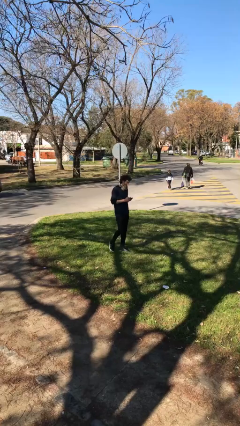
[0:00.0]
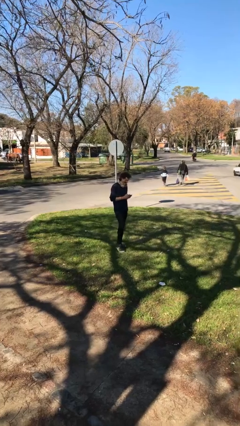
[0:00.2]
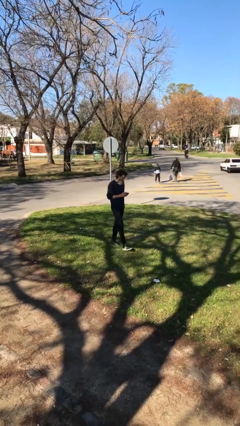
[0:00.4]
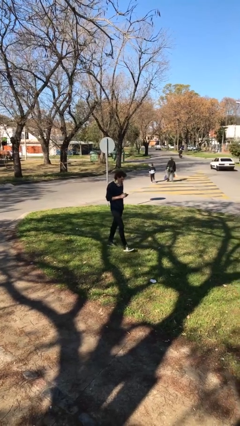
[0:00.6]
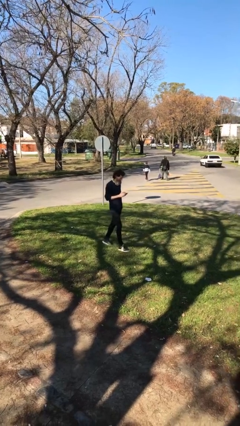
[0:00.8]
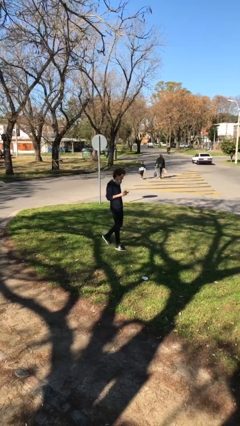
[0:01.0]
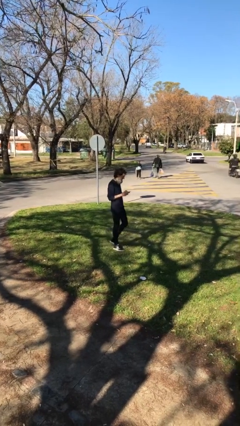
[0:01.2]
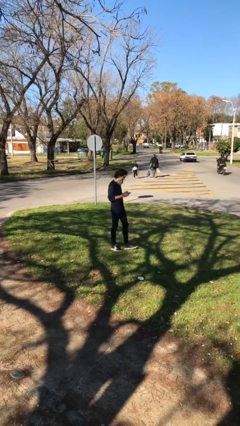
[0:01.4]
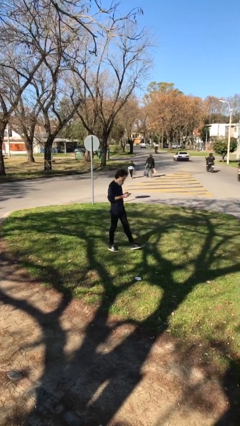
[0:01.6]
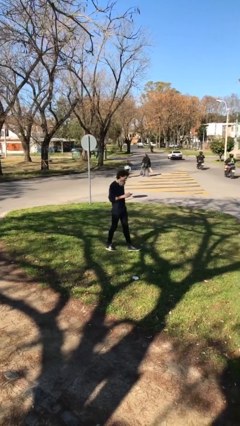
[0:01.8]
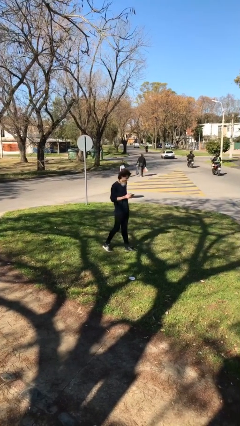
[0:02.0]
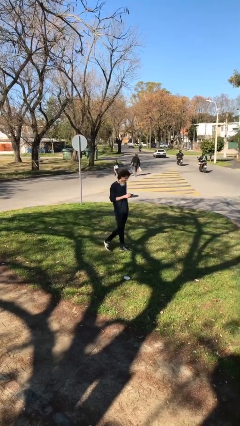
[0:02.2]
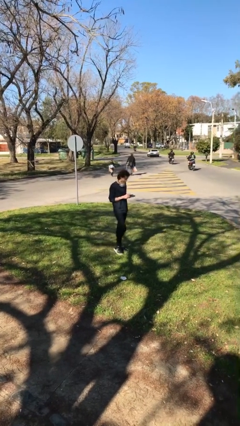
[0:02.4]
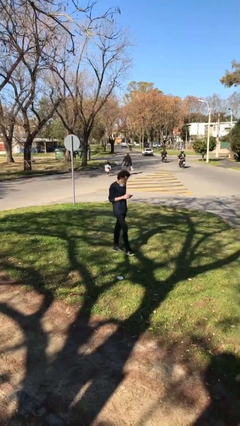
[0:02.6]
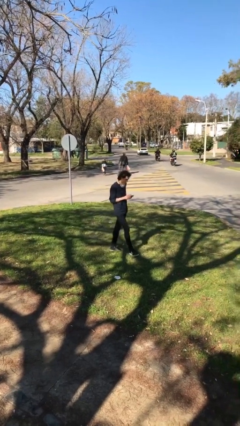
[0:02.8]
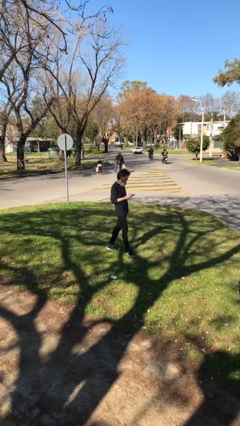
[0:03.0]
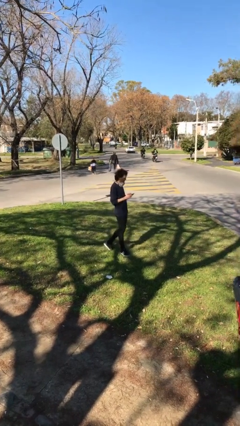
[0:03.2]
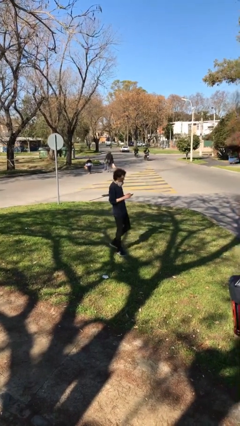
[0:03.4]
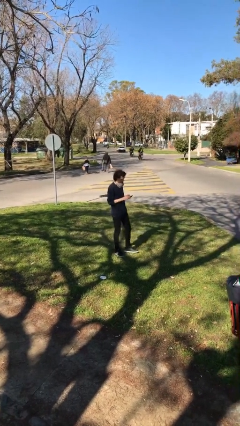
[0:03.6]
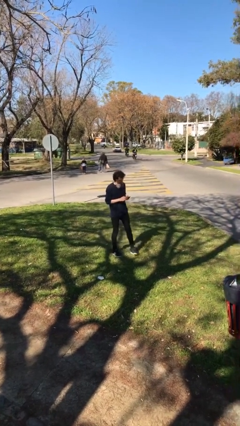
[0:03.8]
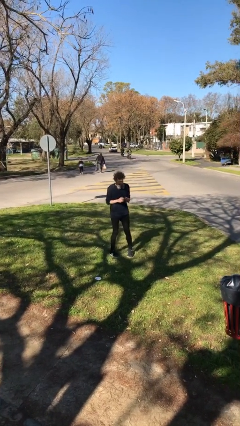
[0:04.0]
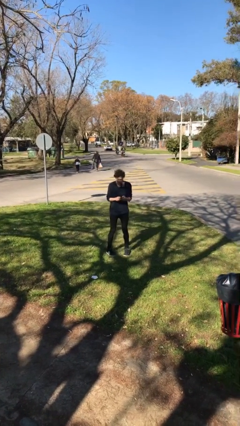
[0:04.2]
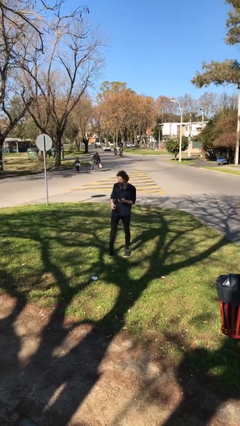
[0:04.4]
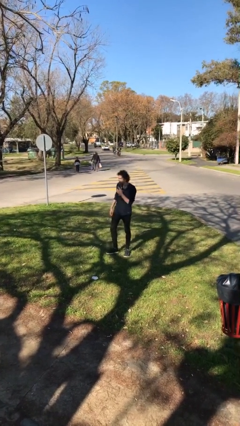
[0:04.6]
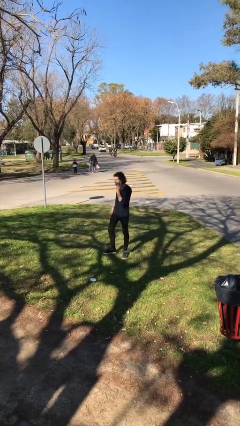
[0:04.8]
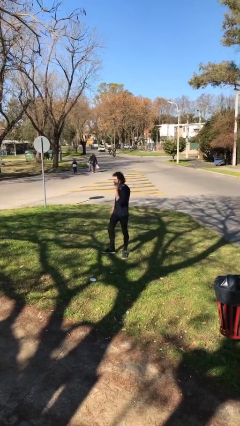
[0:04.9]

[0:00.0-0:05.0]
person texts on phone

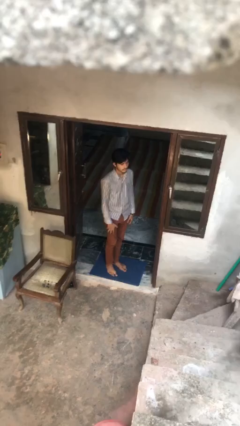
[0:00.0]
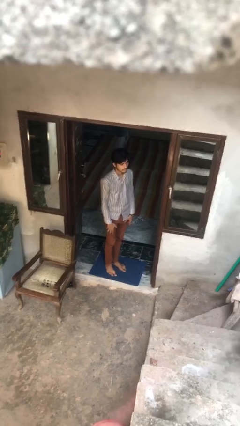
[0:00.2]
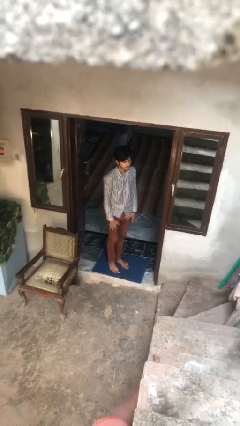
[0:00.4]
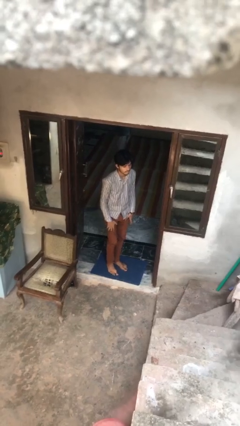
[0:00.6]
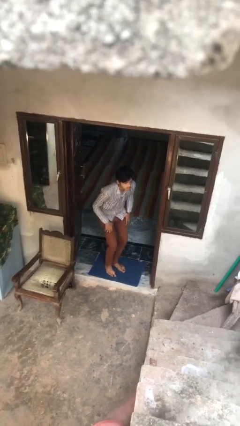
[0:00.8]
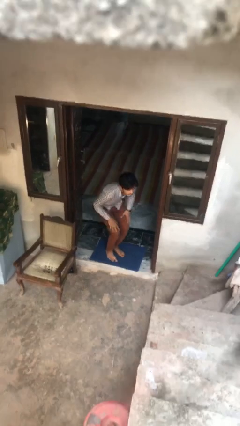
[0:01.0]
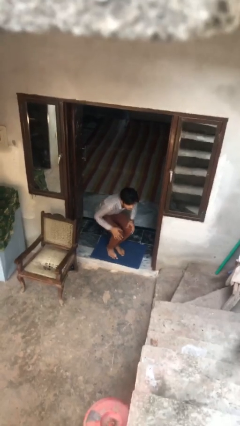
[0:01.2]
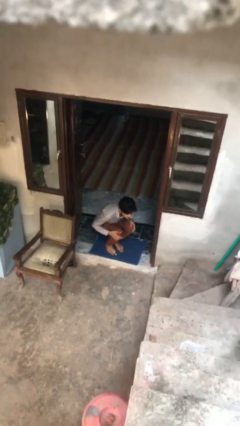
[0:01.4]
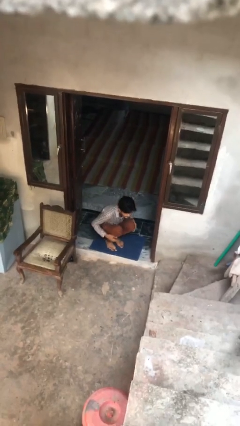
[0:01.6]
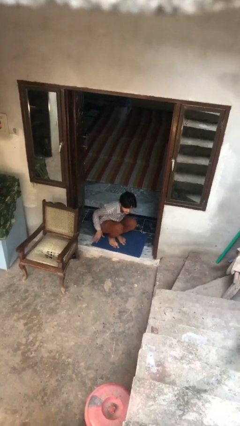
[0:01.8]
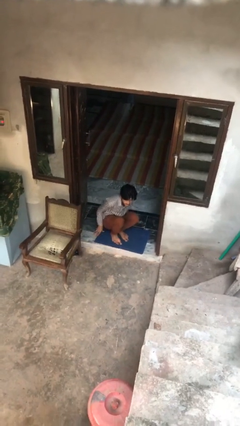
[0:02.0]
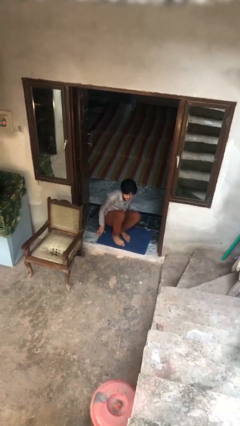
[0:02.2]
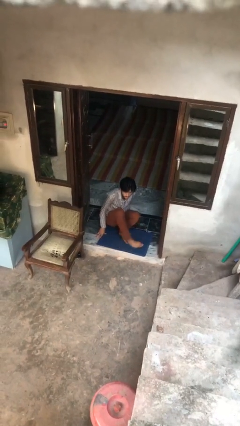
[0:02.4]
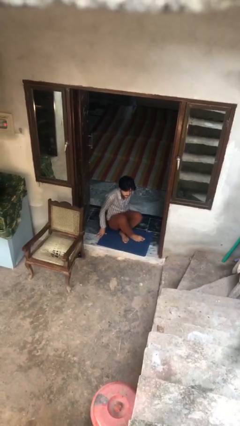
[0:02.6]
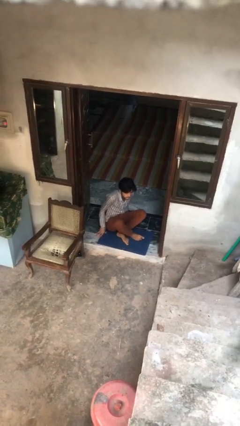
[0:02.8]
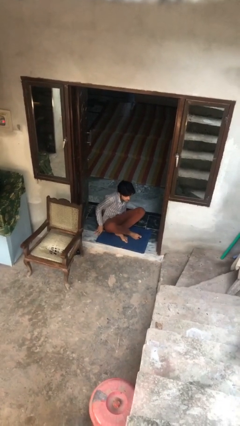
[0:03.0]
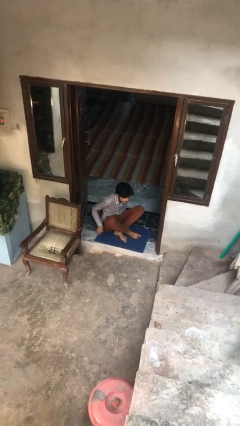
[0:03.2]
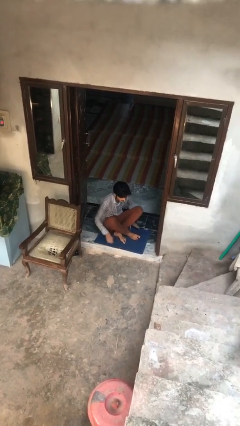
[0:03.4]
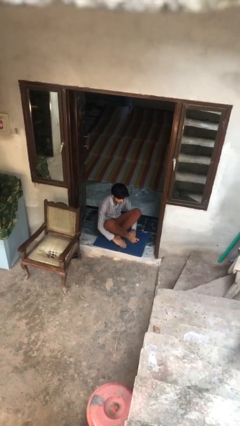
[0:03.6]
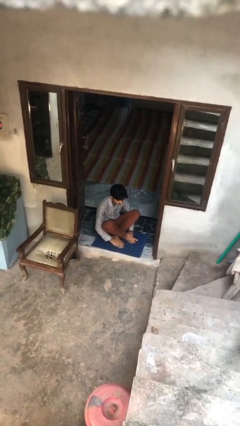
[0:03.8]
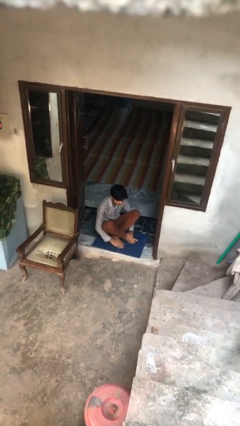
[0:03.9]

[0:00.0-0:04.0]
person sits crisscross

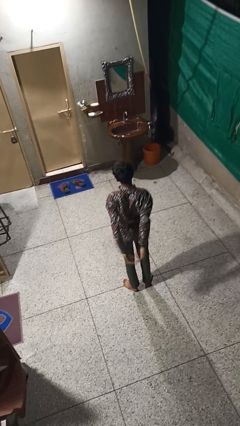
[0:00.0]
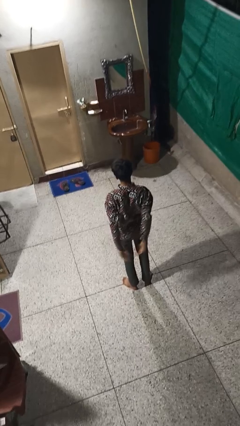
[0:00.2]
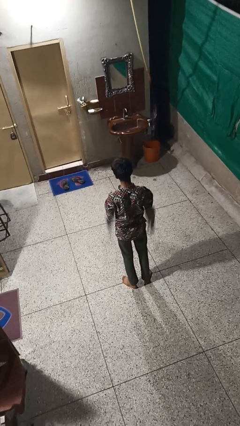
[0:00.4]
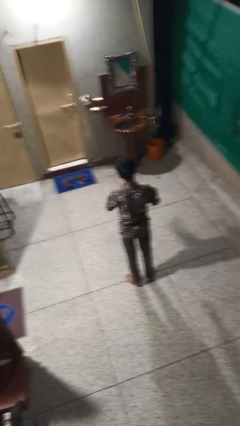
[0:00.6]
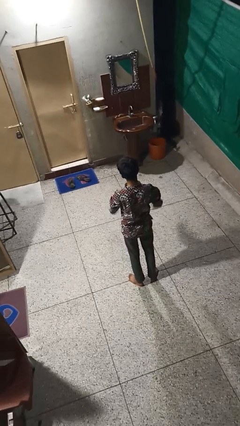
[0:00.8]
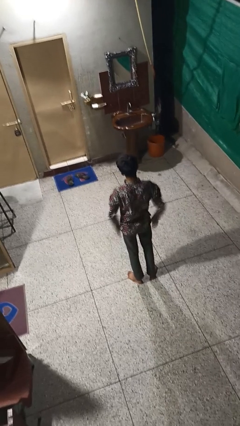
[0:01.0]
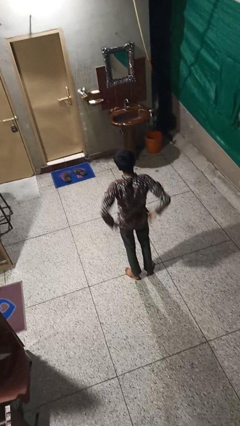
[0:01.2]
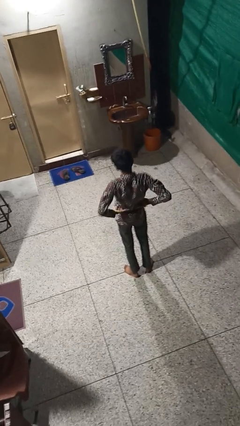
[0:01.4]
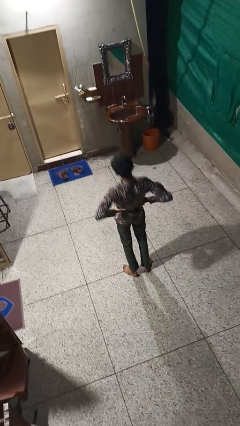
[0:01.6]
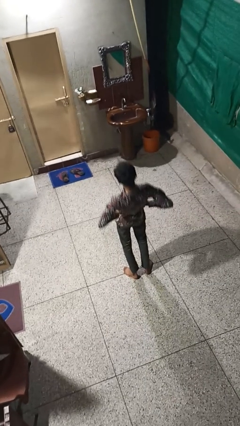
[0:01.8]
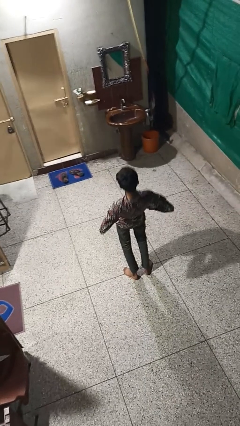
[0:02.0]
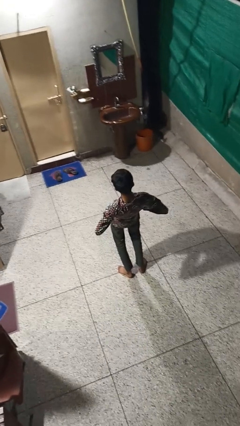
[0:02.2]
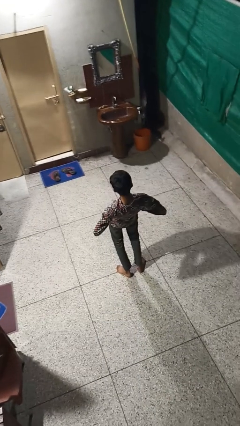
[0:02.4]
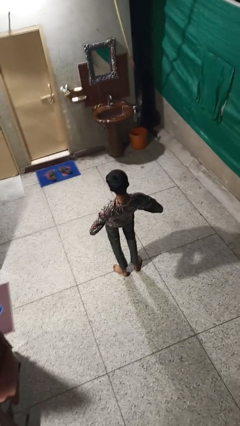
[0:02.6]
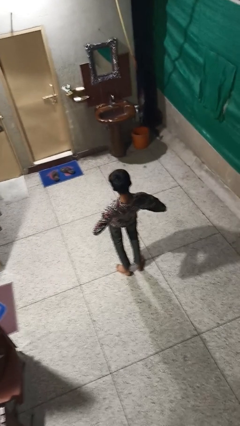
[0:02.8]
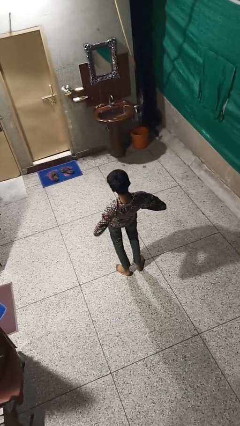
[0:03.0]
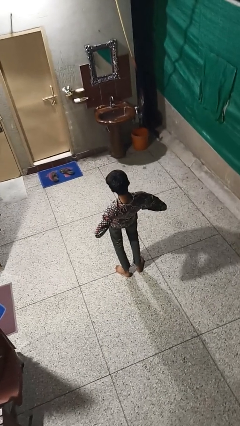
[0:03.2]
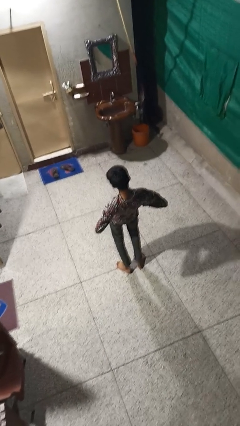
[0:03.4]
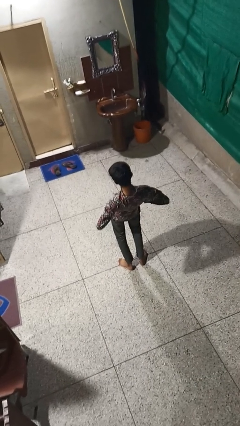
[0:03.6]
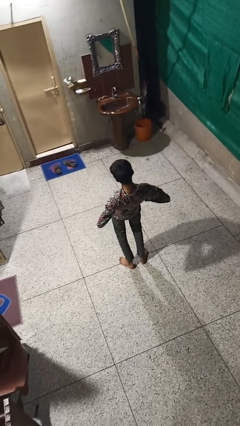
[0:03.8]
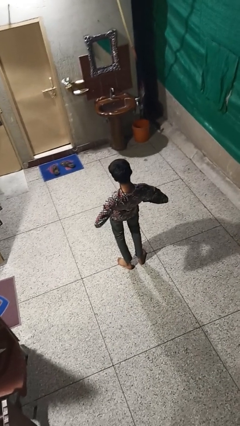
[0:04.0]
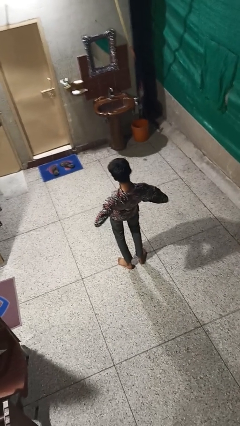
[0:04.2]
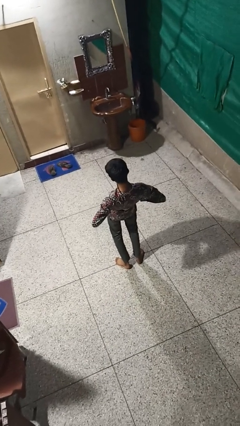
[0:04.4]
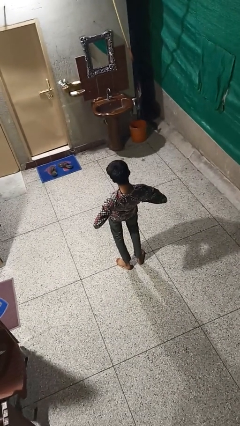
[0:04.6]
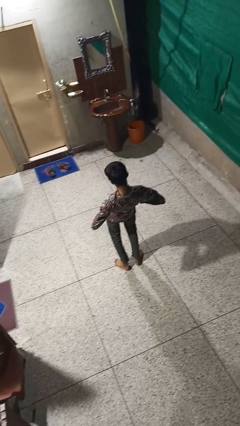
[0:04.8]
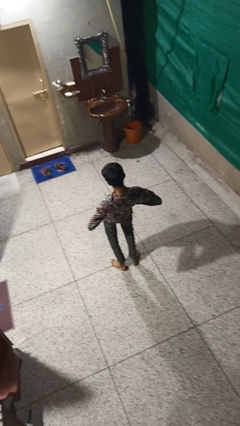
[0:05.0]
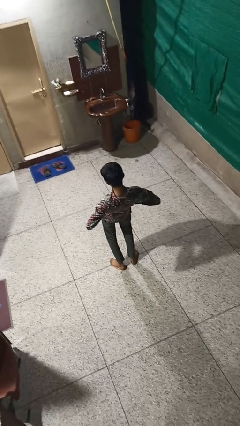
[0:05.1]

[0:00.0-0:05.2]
person stretches back

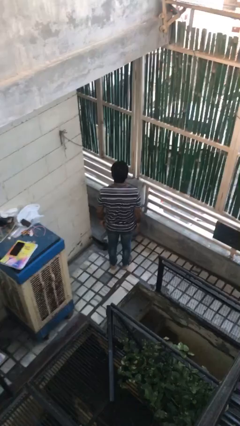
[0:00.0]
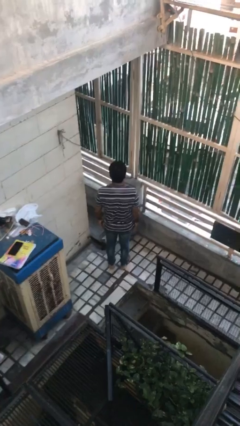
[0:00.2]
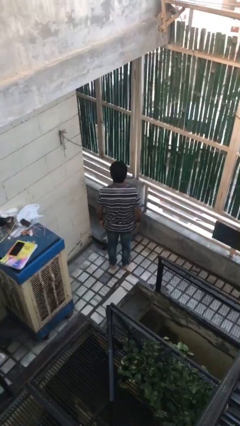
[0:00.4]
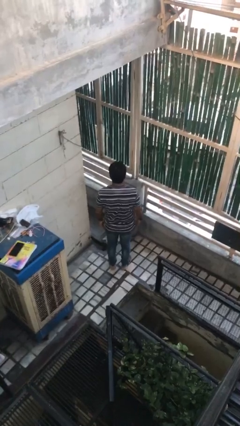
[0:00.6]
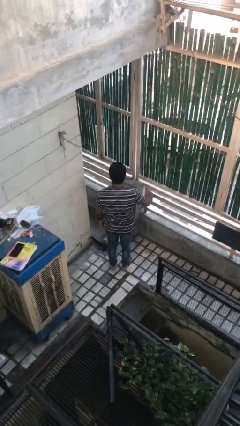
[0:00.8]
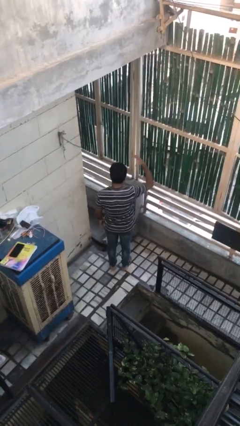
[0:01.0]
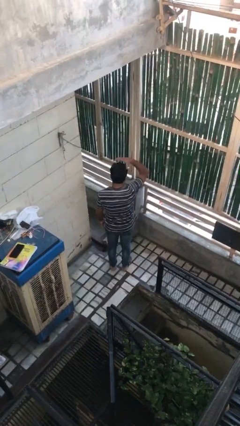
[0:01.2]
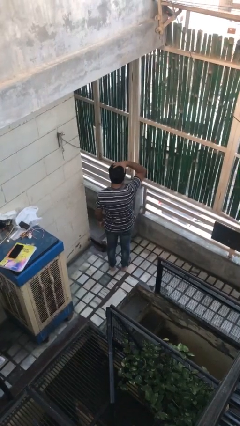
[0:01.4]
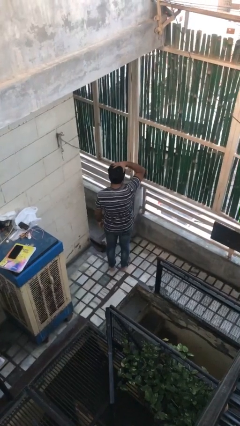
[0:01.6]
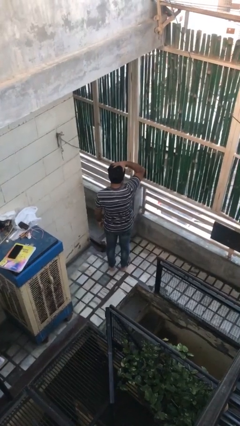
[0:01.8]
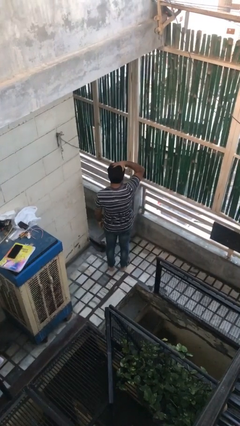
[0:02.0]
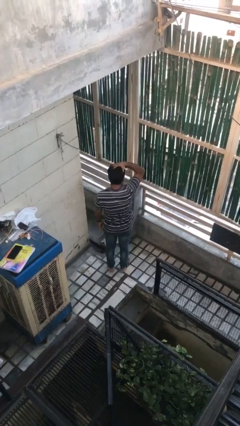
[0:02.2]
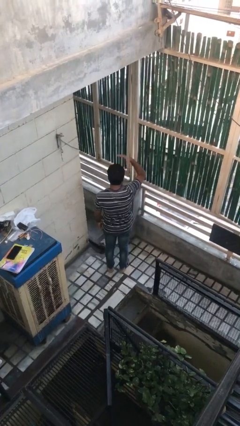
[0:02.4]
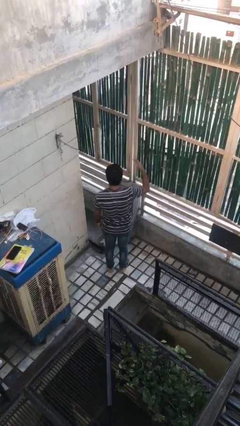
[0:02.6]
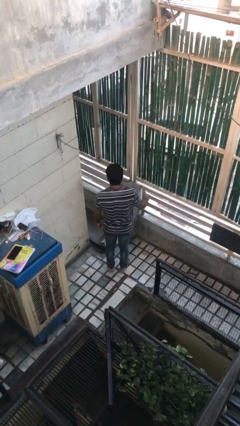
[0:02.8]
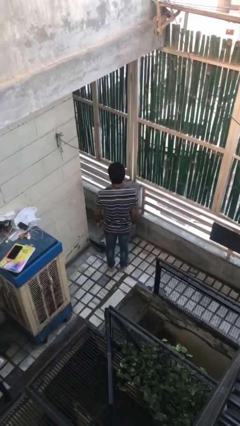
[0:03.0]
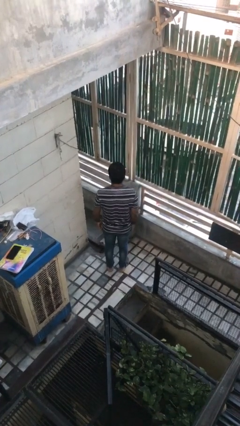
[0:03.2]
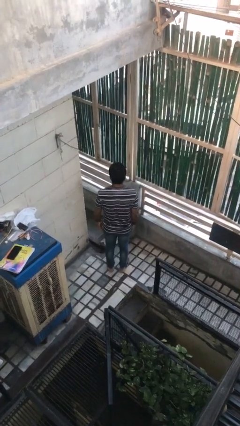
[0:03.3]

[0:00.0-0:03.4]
person pats head

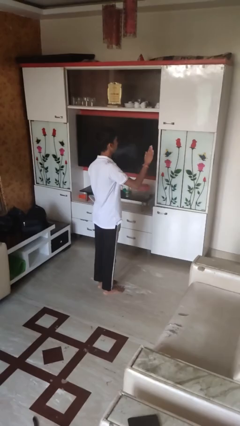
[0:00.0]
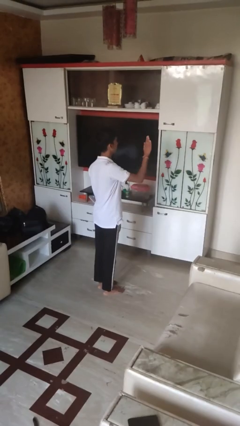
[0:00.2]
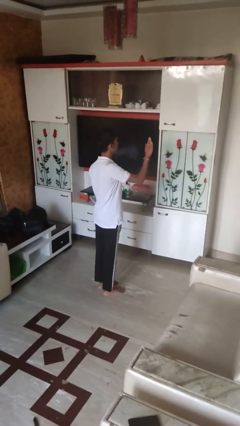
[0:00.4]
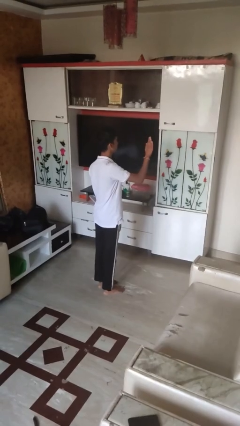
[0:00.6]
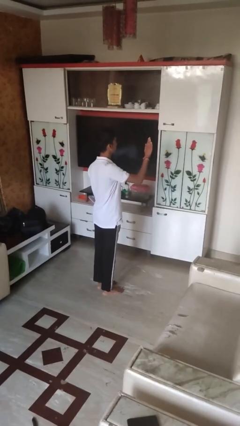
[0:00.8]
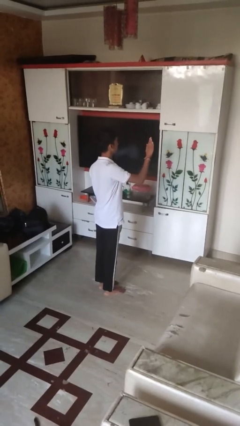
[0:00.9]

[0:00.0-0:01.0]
person gestures swipe up
